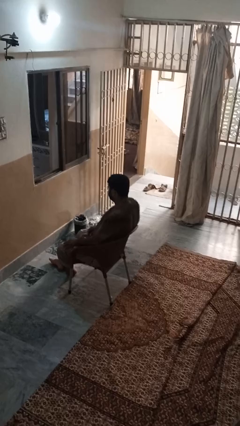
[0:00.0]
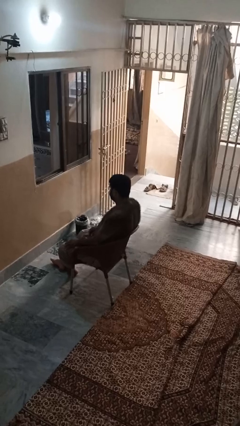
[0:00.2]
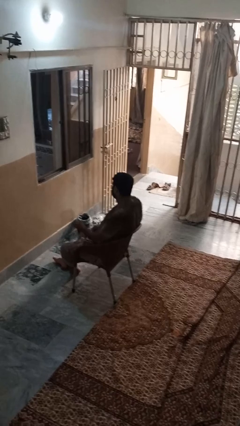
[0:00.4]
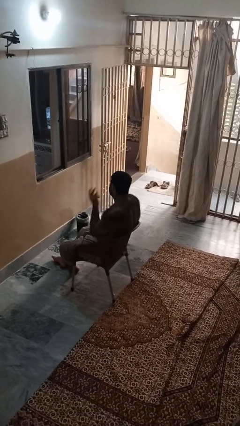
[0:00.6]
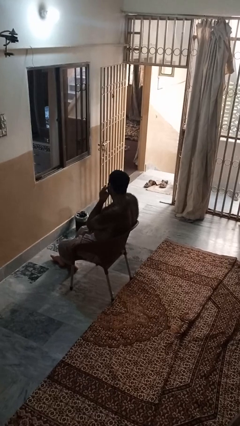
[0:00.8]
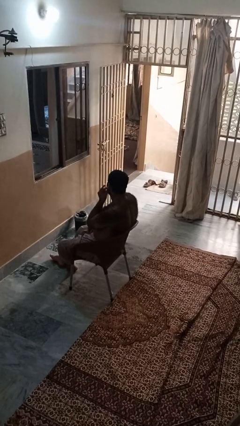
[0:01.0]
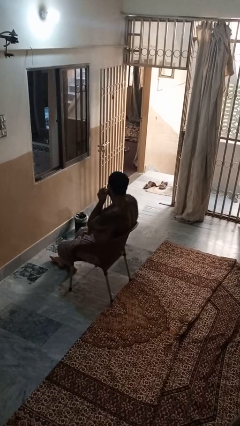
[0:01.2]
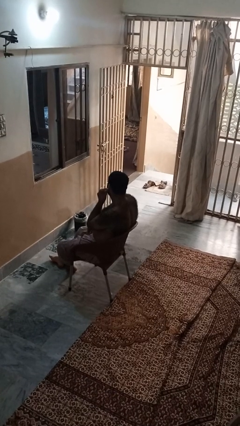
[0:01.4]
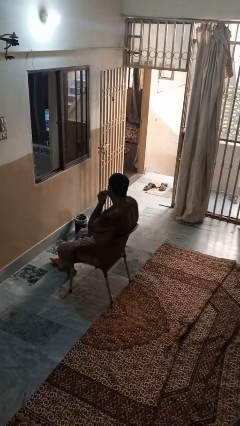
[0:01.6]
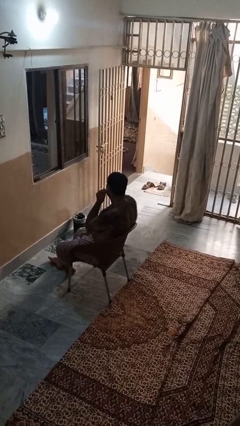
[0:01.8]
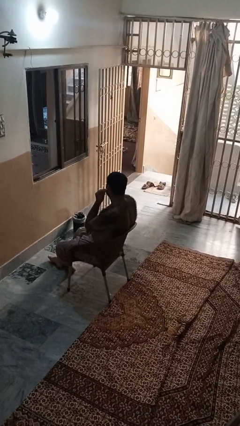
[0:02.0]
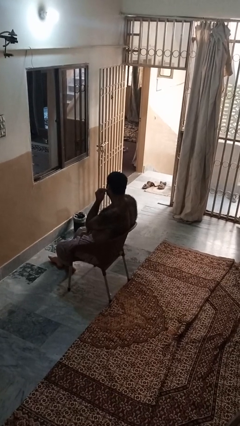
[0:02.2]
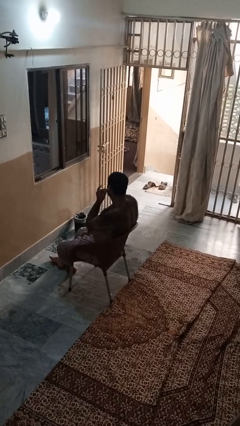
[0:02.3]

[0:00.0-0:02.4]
person touches earlobe

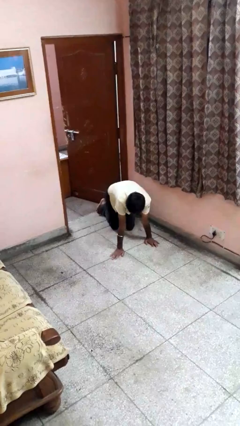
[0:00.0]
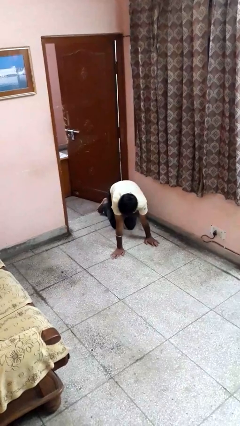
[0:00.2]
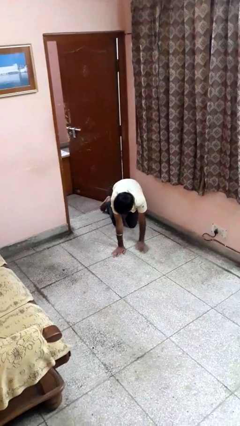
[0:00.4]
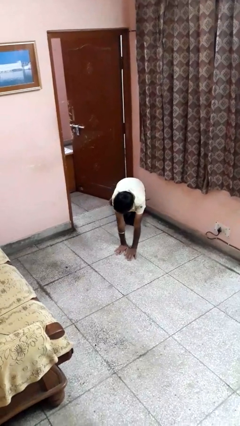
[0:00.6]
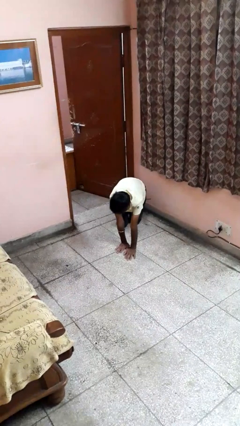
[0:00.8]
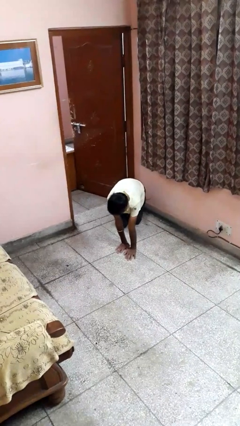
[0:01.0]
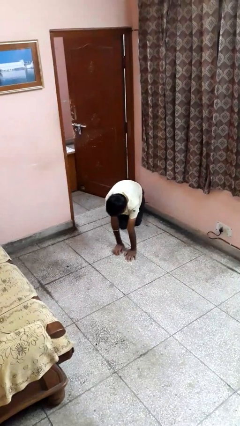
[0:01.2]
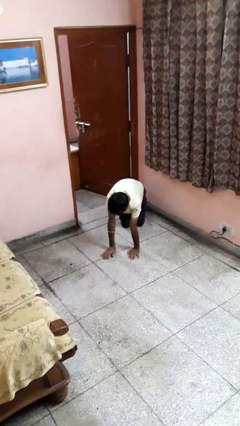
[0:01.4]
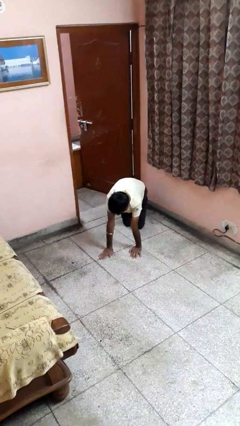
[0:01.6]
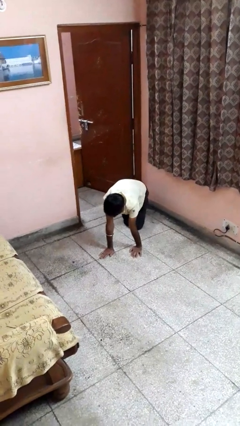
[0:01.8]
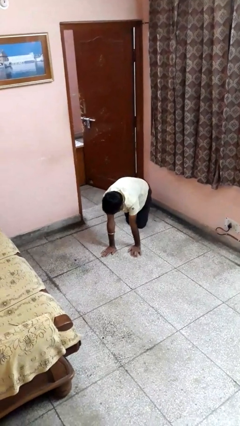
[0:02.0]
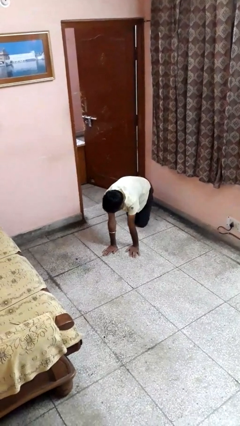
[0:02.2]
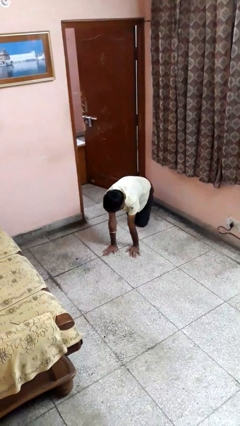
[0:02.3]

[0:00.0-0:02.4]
person crawls

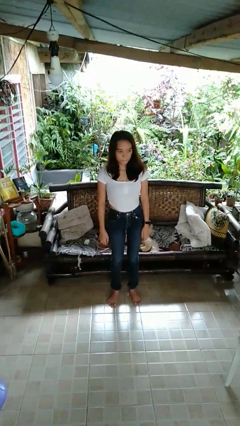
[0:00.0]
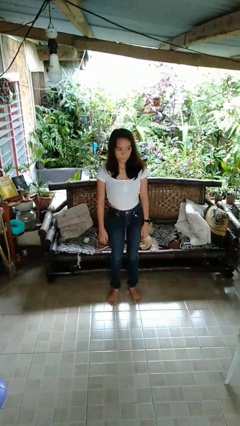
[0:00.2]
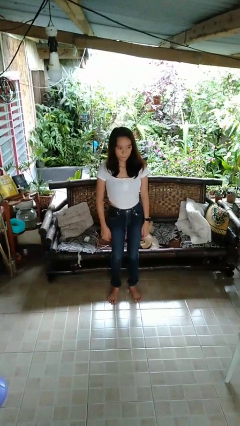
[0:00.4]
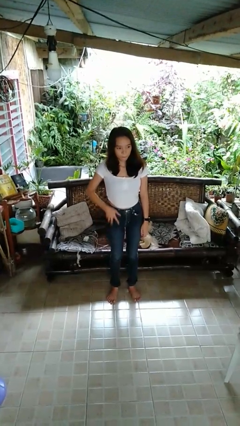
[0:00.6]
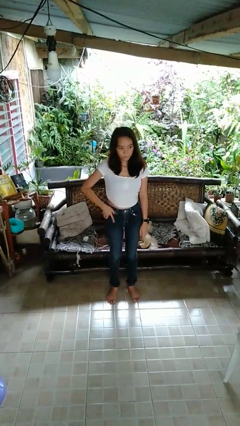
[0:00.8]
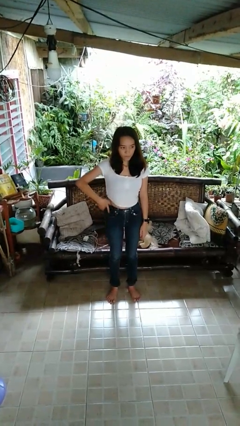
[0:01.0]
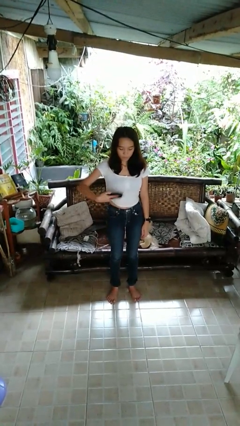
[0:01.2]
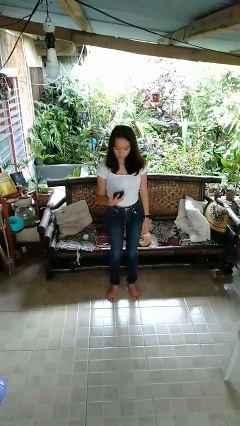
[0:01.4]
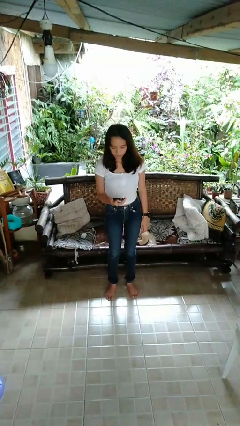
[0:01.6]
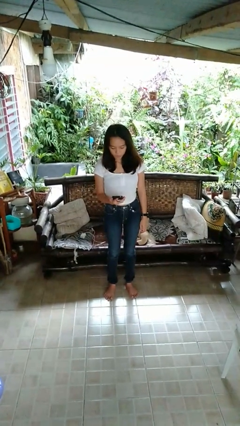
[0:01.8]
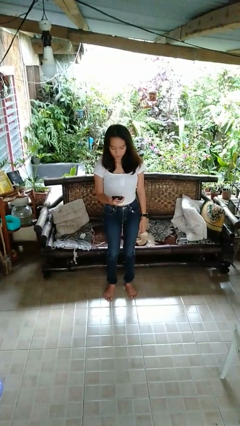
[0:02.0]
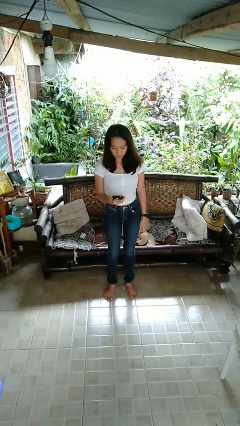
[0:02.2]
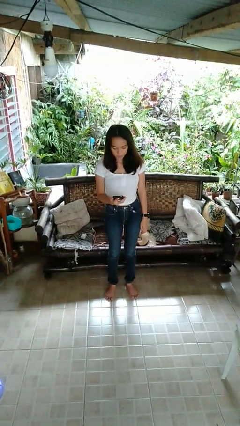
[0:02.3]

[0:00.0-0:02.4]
person takes phone from pocket

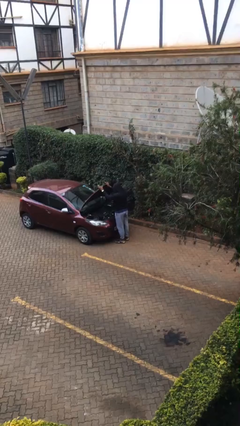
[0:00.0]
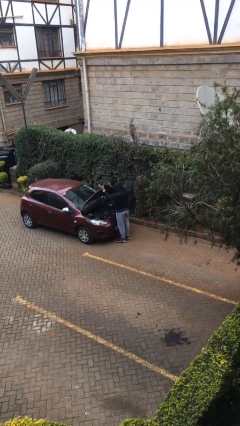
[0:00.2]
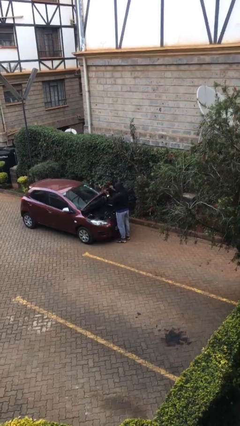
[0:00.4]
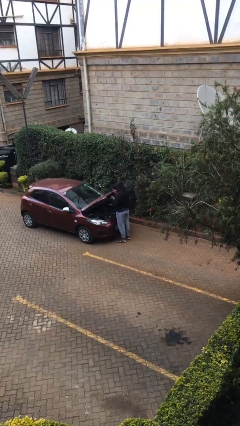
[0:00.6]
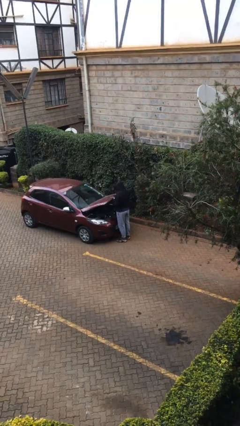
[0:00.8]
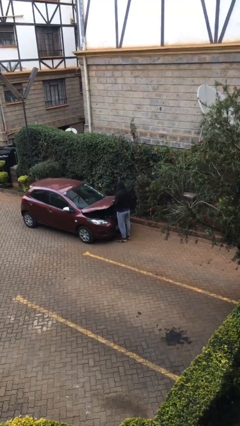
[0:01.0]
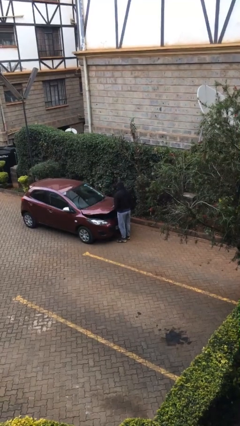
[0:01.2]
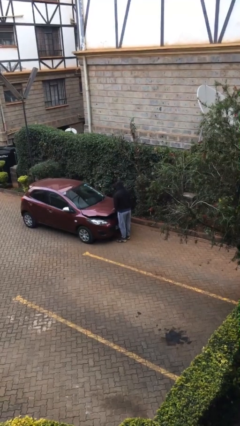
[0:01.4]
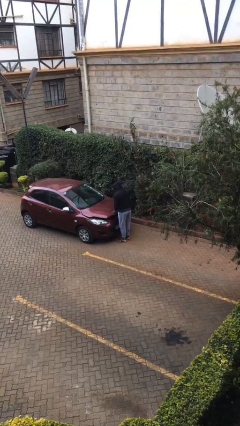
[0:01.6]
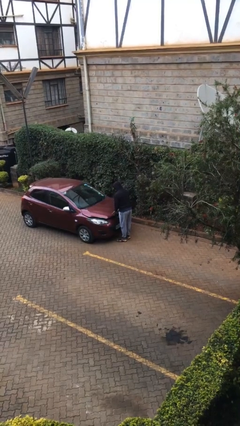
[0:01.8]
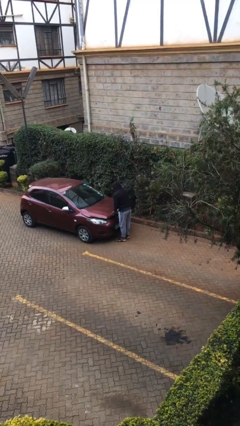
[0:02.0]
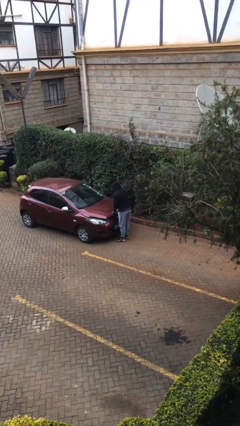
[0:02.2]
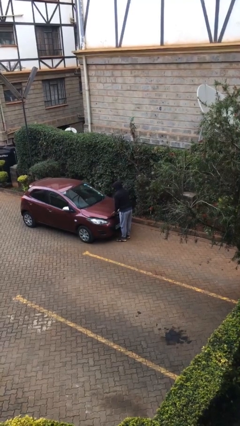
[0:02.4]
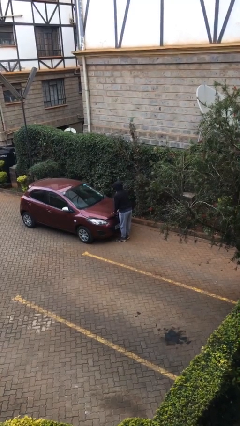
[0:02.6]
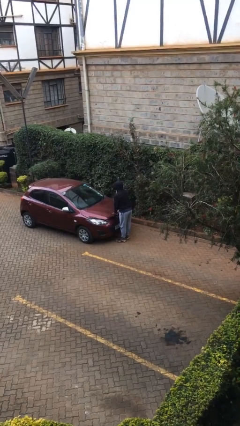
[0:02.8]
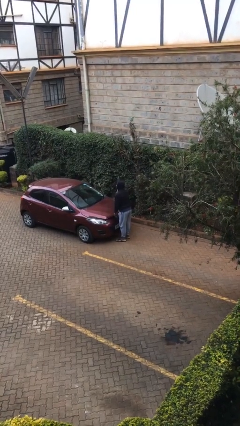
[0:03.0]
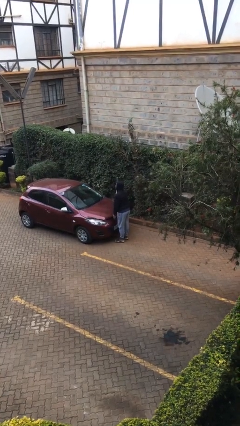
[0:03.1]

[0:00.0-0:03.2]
person closes car hood

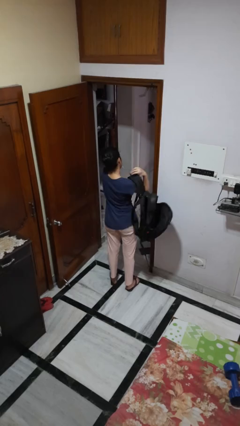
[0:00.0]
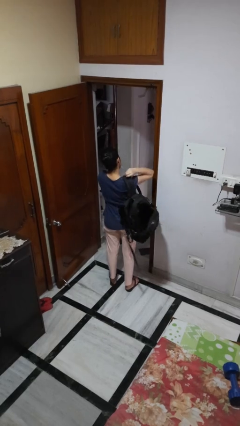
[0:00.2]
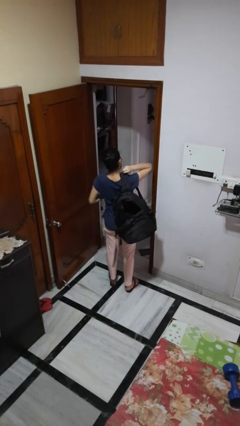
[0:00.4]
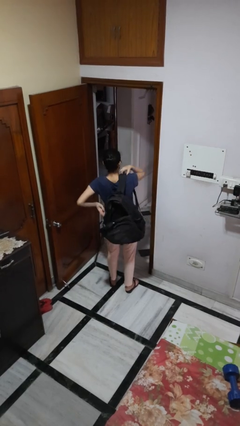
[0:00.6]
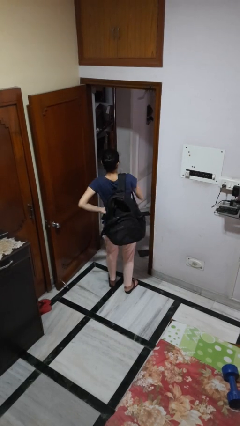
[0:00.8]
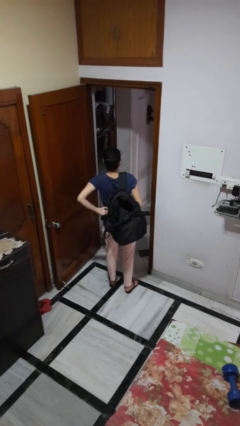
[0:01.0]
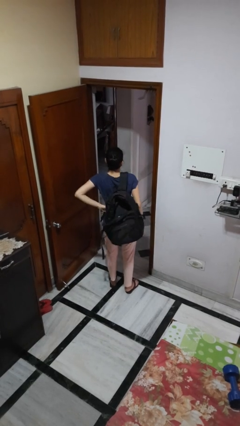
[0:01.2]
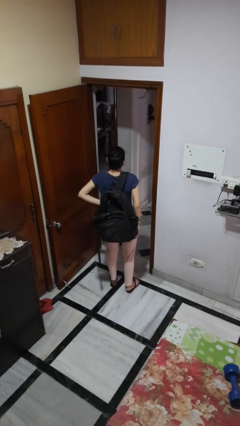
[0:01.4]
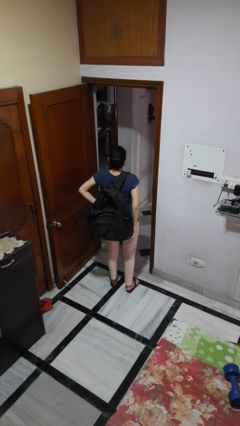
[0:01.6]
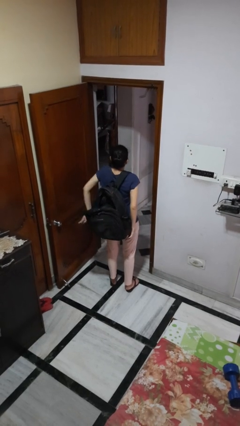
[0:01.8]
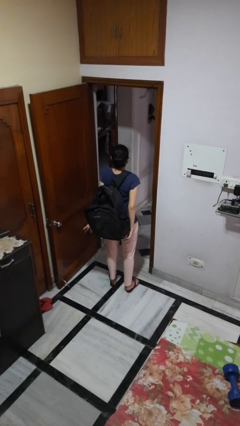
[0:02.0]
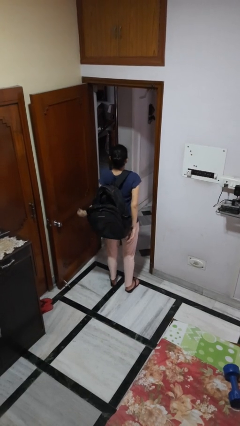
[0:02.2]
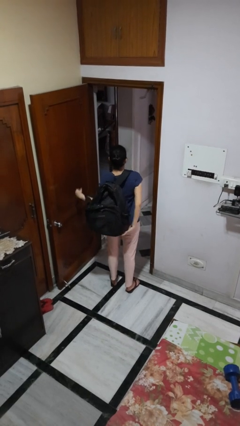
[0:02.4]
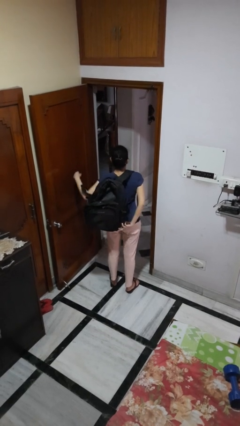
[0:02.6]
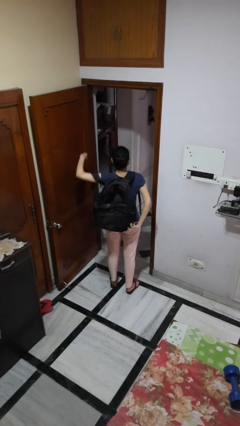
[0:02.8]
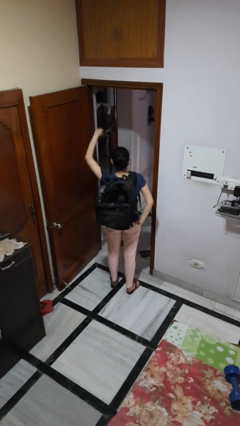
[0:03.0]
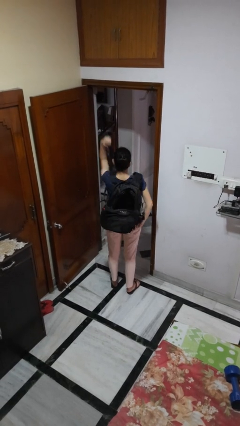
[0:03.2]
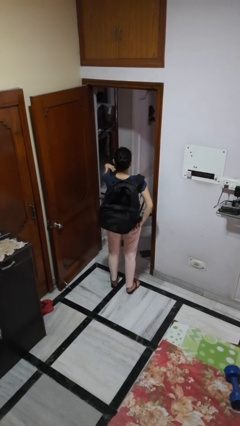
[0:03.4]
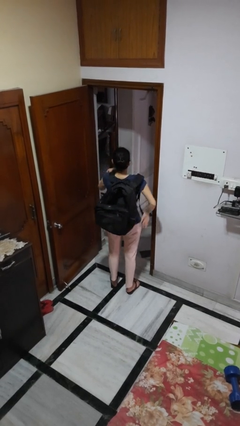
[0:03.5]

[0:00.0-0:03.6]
person puts on backpack

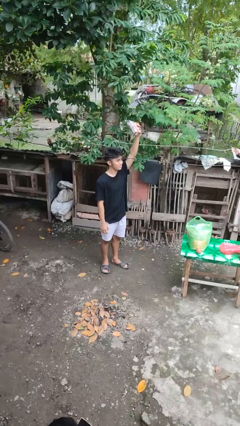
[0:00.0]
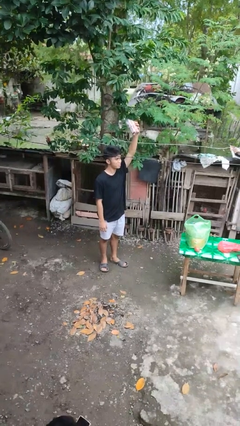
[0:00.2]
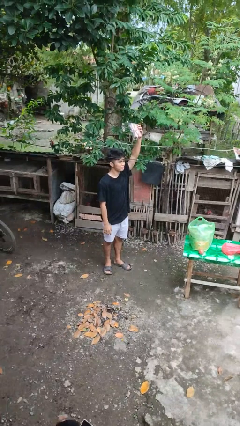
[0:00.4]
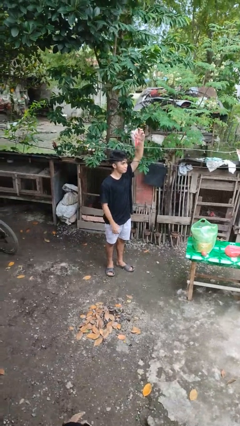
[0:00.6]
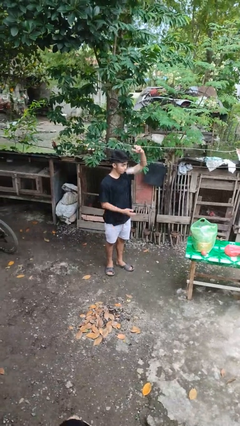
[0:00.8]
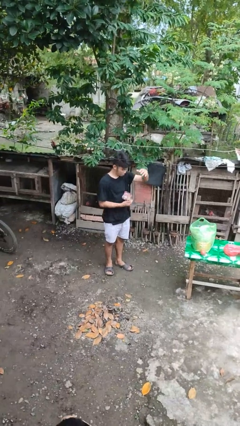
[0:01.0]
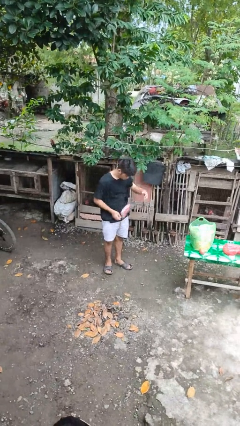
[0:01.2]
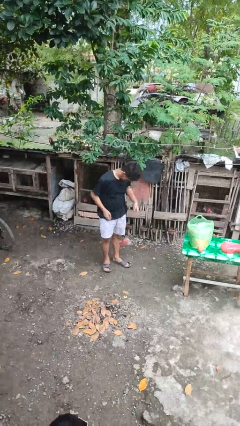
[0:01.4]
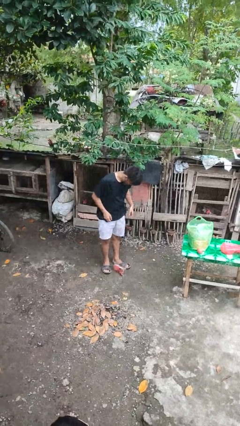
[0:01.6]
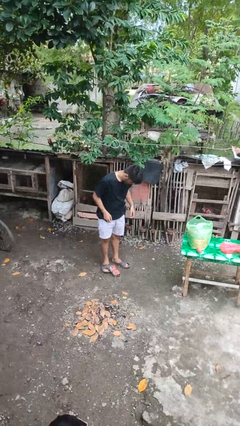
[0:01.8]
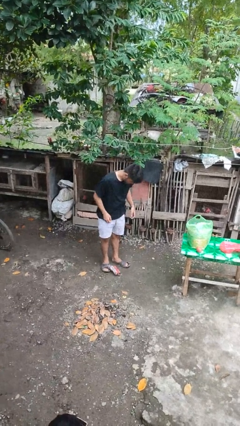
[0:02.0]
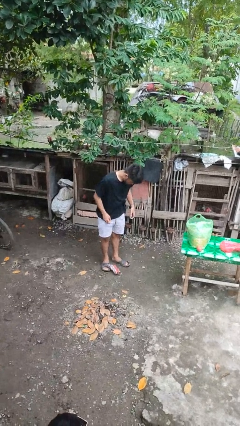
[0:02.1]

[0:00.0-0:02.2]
person drops object

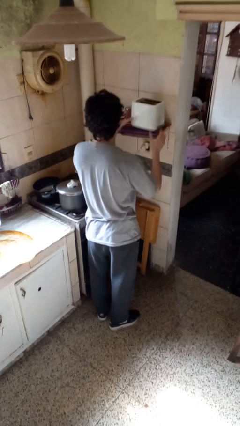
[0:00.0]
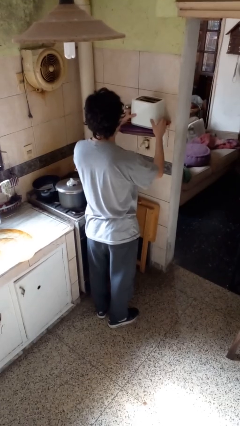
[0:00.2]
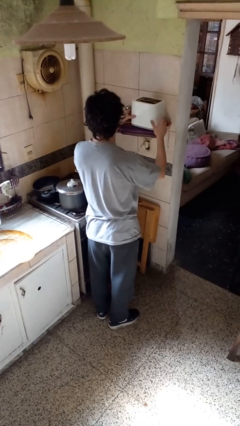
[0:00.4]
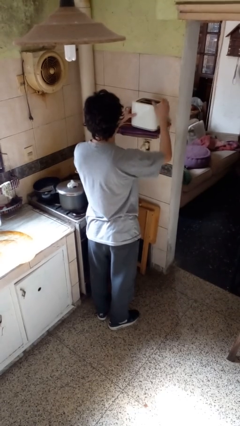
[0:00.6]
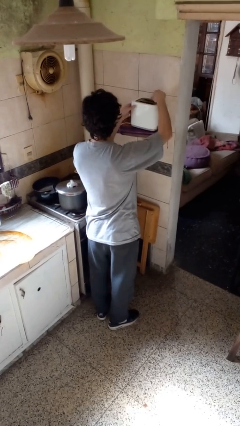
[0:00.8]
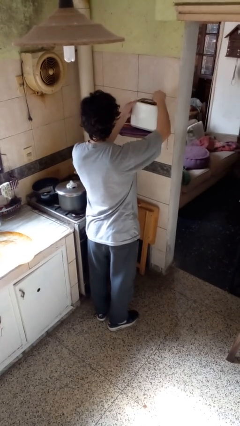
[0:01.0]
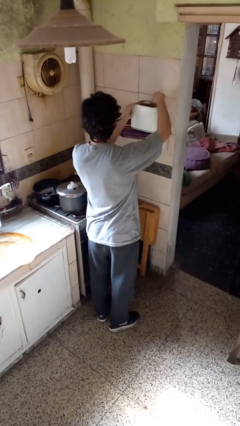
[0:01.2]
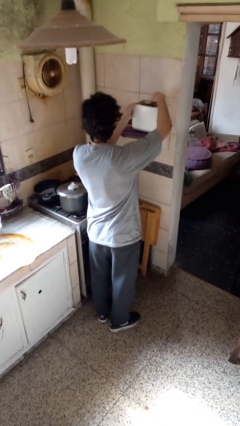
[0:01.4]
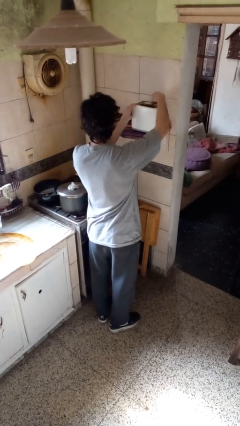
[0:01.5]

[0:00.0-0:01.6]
person takes object from toaster
